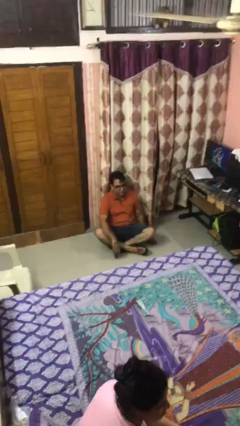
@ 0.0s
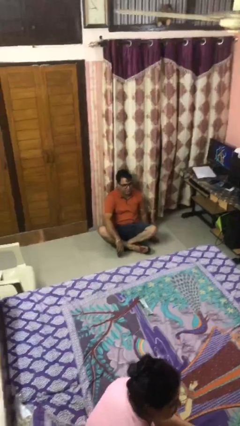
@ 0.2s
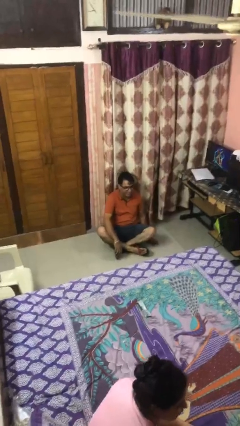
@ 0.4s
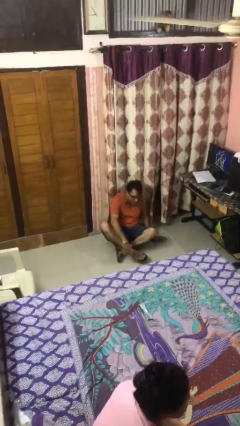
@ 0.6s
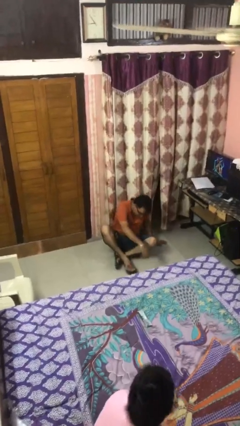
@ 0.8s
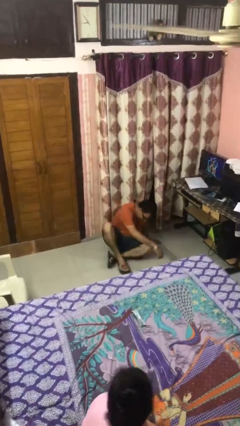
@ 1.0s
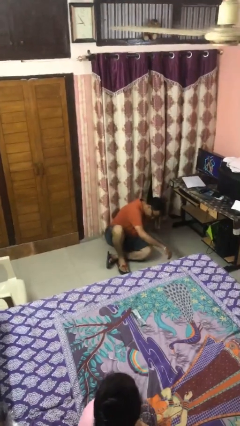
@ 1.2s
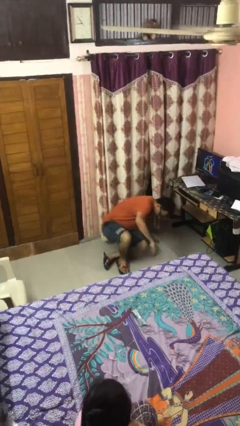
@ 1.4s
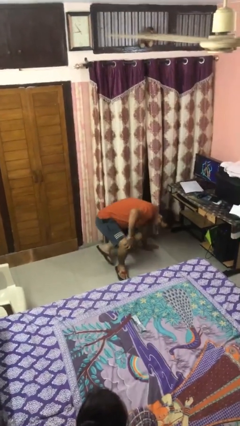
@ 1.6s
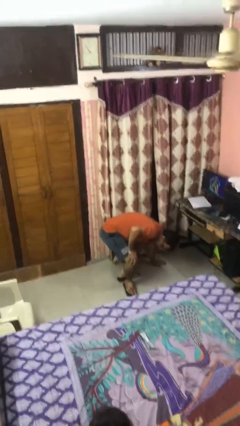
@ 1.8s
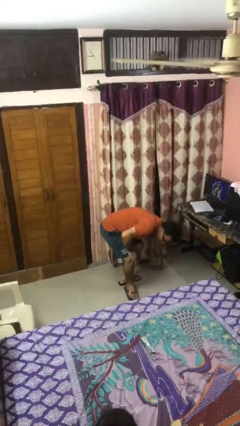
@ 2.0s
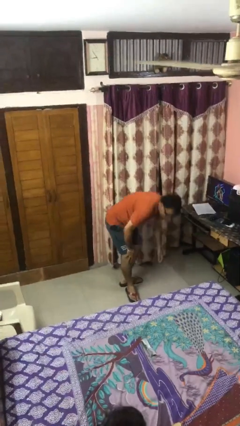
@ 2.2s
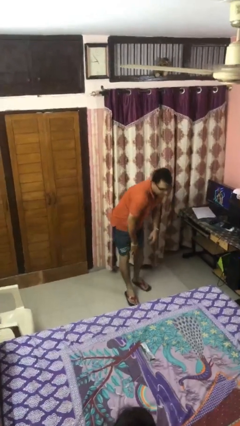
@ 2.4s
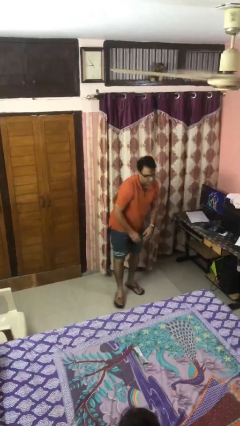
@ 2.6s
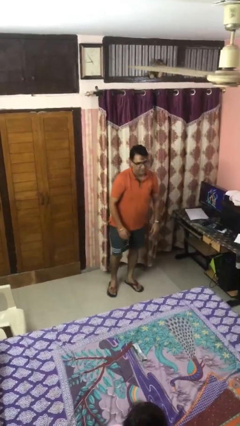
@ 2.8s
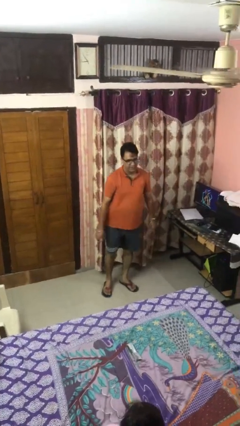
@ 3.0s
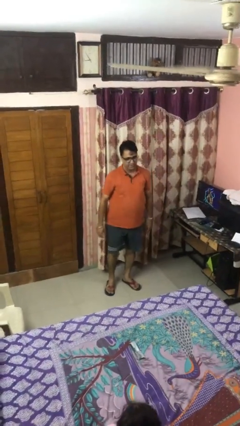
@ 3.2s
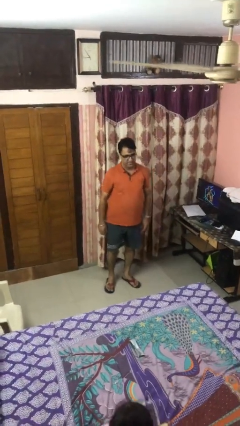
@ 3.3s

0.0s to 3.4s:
person stands up from floor

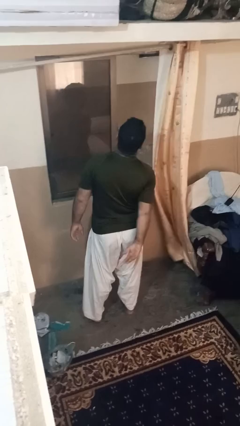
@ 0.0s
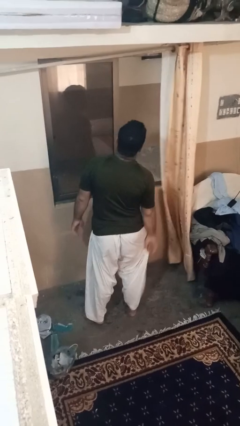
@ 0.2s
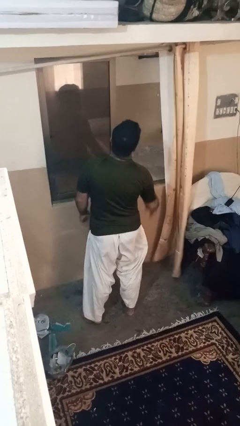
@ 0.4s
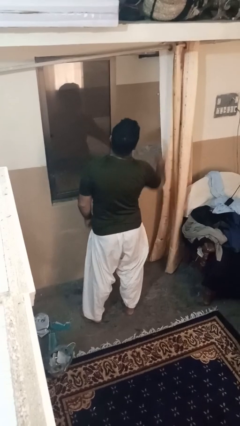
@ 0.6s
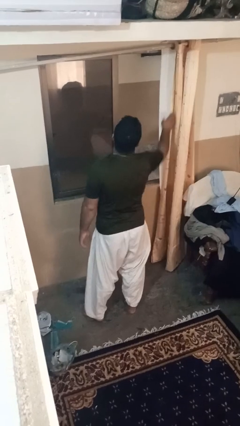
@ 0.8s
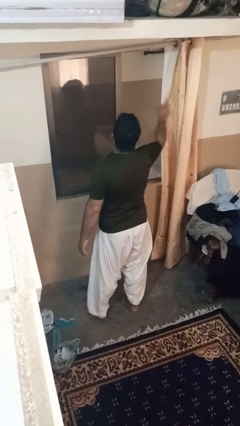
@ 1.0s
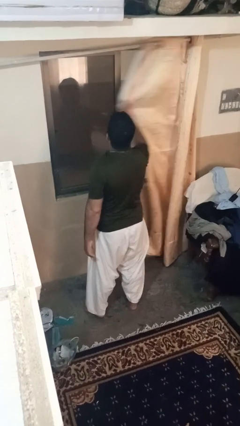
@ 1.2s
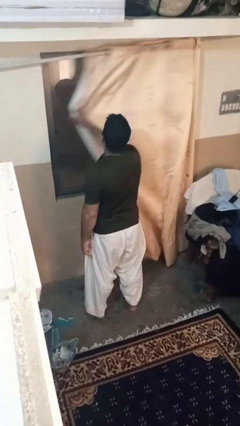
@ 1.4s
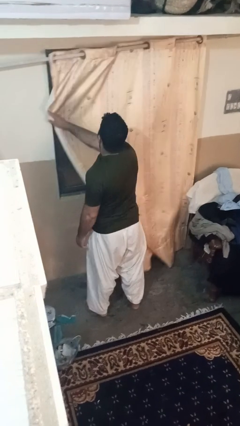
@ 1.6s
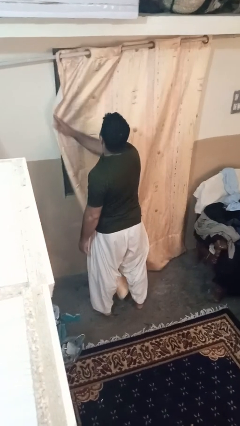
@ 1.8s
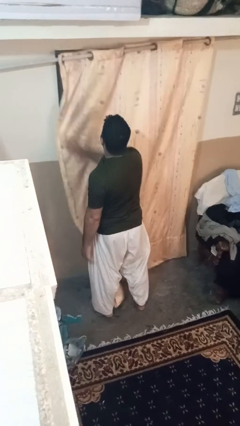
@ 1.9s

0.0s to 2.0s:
person closes curtains

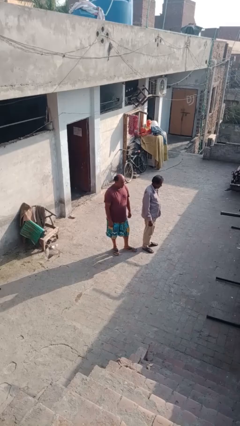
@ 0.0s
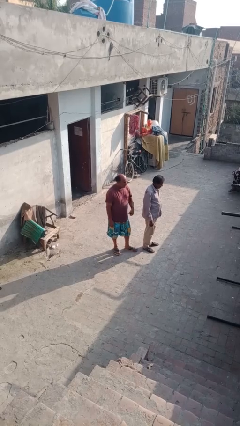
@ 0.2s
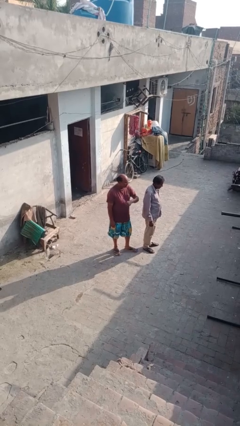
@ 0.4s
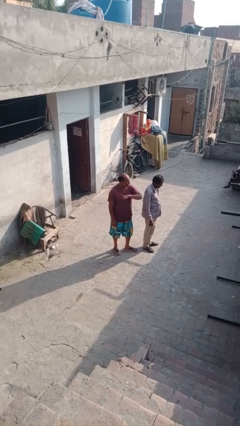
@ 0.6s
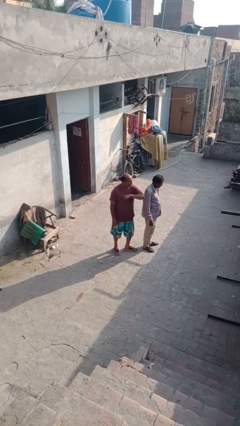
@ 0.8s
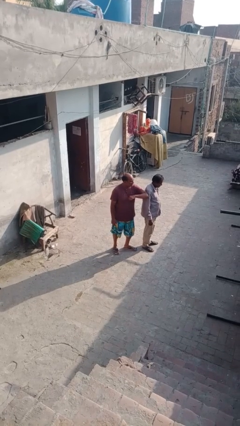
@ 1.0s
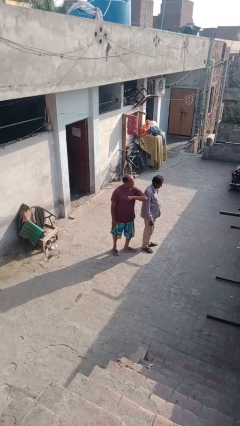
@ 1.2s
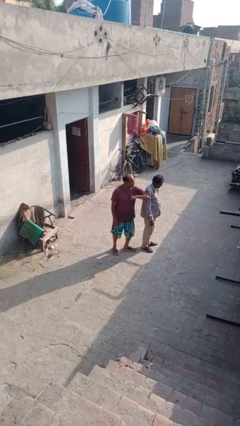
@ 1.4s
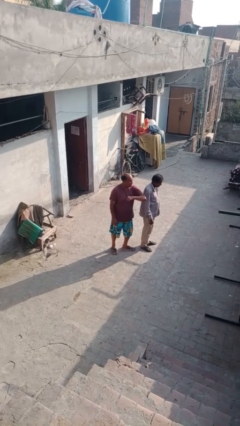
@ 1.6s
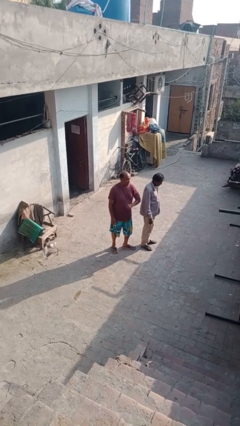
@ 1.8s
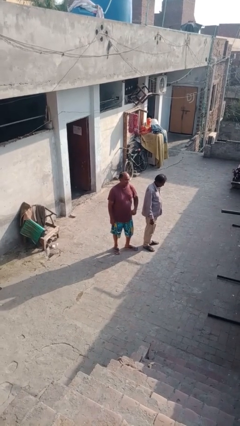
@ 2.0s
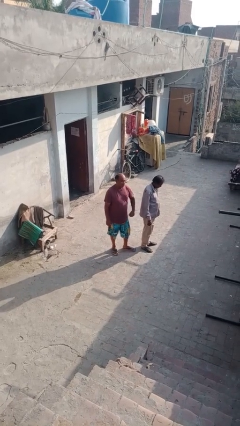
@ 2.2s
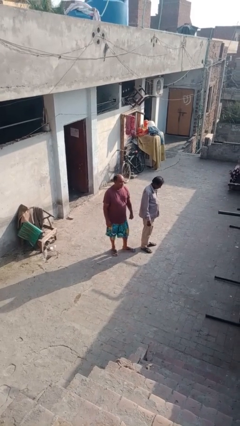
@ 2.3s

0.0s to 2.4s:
person nudges person with elbow

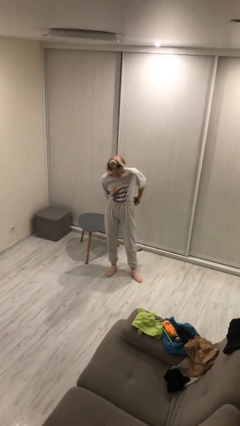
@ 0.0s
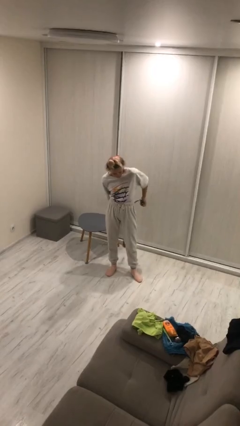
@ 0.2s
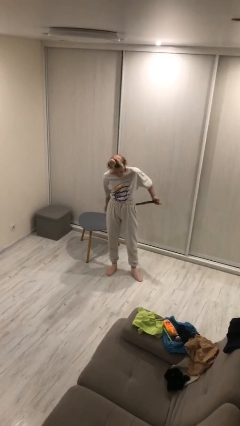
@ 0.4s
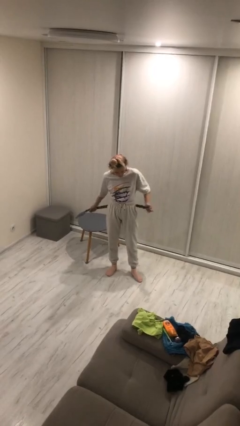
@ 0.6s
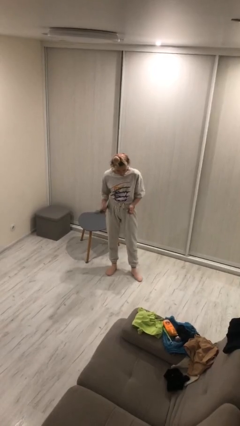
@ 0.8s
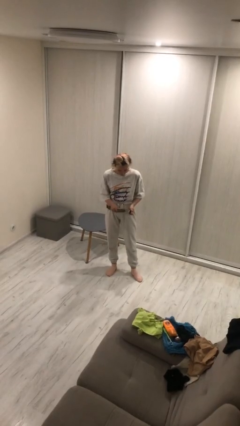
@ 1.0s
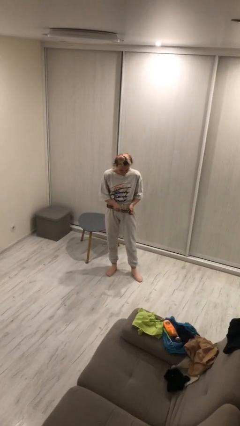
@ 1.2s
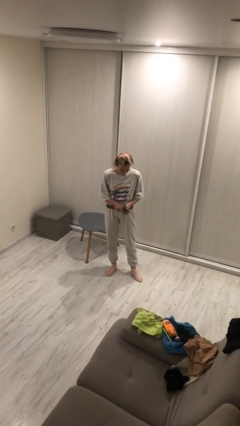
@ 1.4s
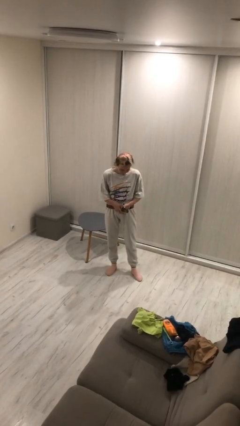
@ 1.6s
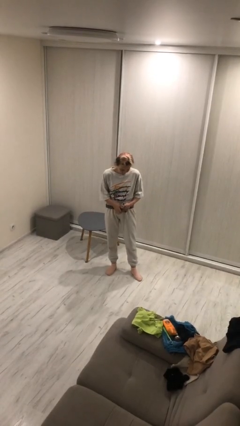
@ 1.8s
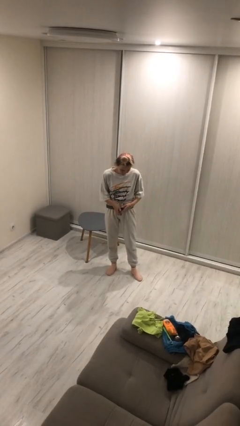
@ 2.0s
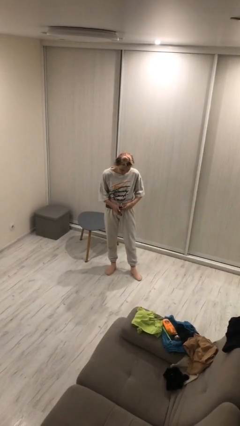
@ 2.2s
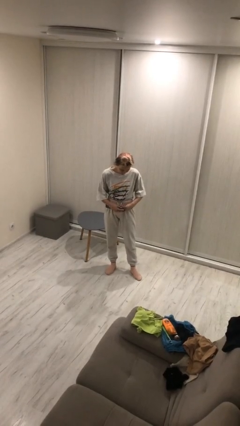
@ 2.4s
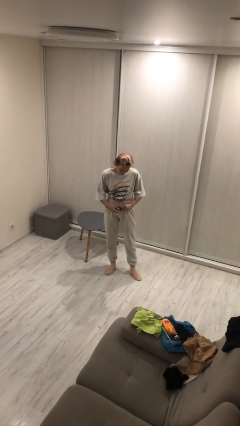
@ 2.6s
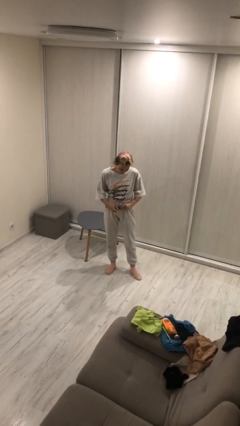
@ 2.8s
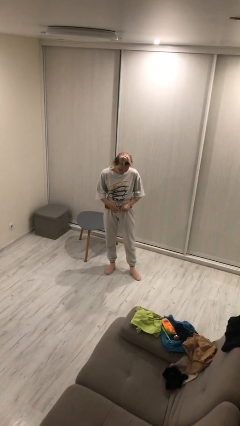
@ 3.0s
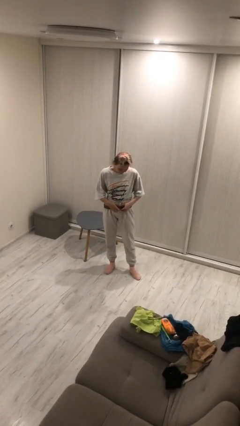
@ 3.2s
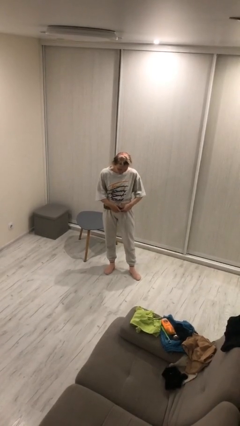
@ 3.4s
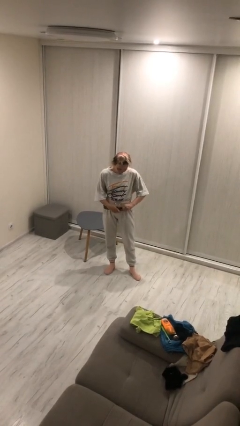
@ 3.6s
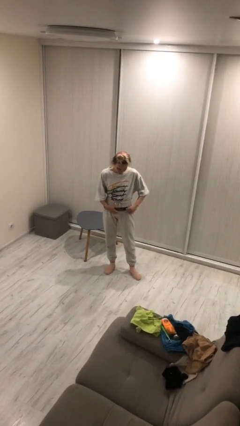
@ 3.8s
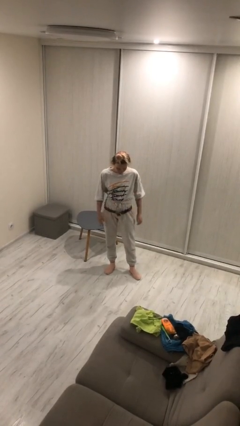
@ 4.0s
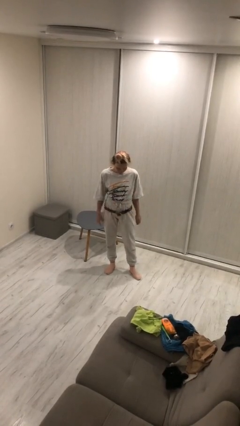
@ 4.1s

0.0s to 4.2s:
person puts on belt

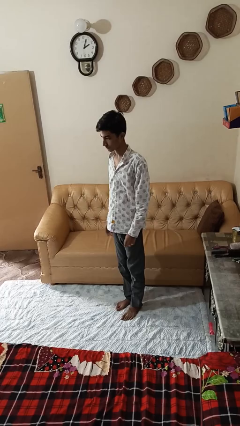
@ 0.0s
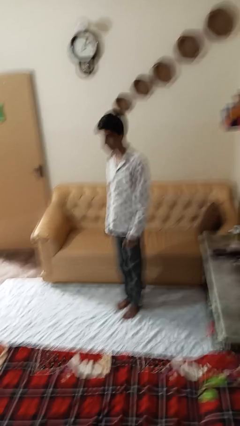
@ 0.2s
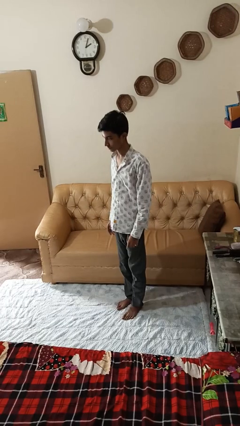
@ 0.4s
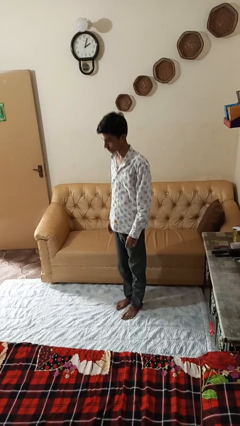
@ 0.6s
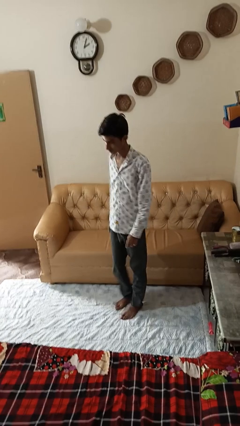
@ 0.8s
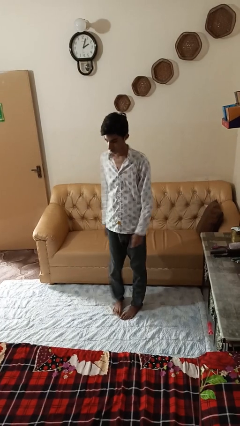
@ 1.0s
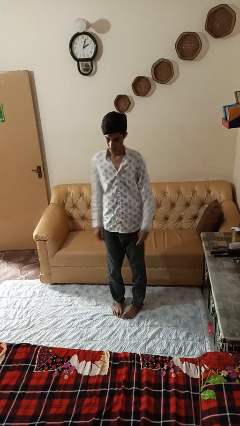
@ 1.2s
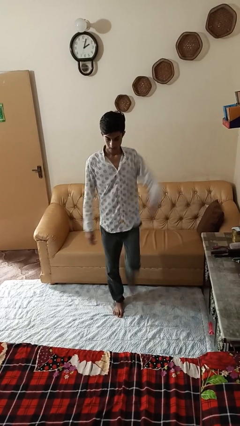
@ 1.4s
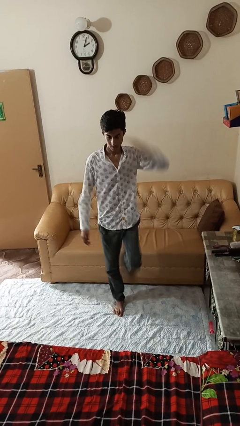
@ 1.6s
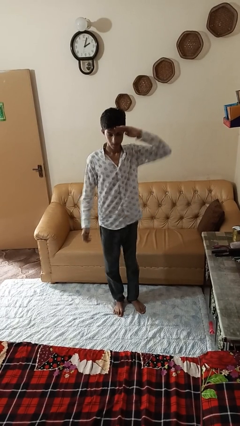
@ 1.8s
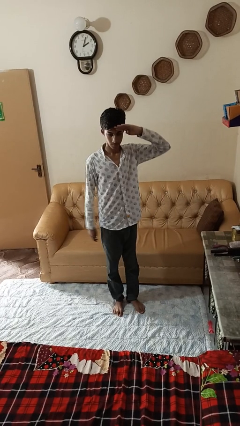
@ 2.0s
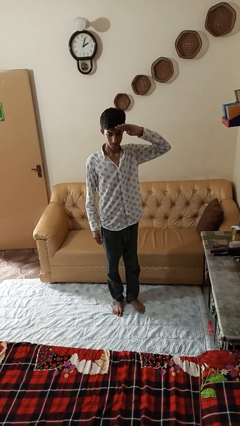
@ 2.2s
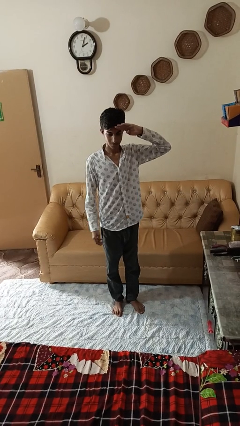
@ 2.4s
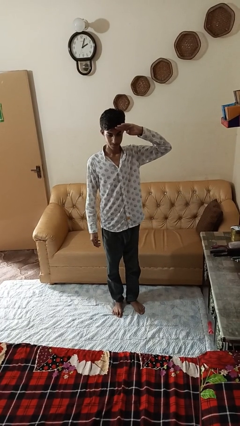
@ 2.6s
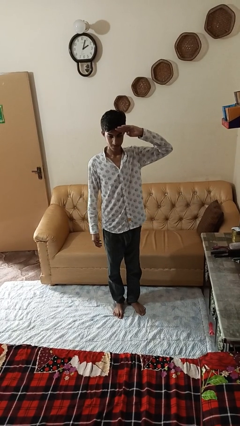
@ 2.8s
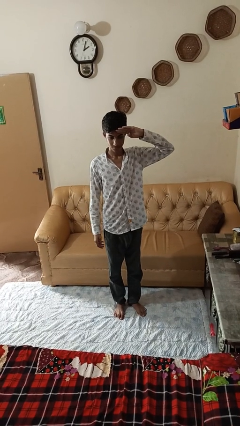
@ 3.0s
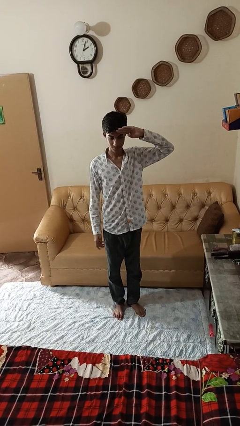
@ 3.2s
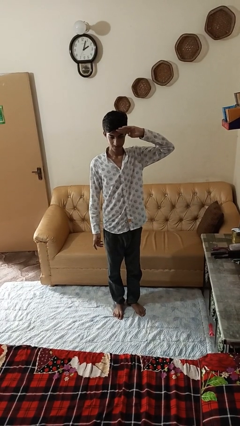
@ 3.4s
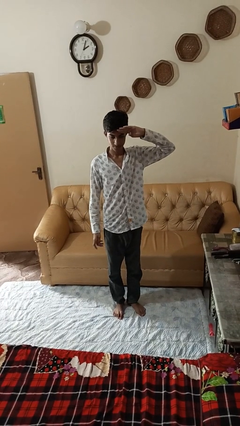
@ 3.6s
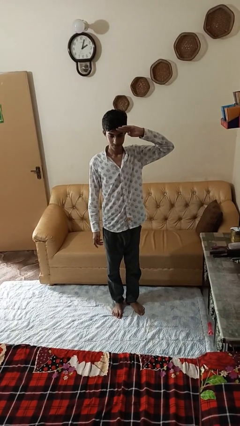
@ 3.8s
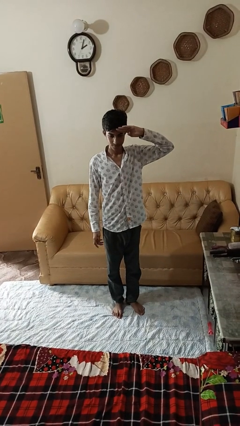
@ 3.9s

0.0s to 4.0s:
person salutes

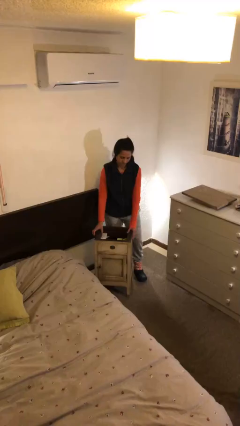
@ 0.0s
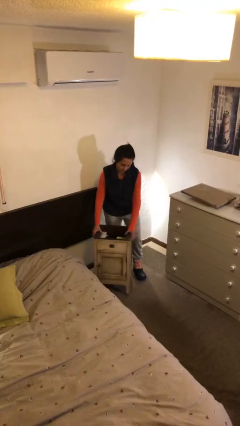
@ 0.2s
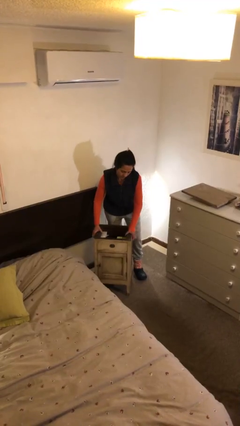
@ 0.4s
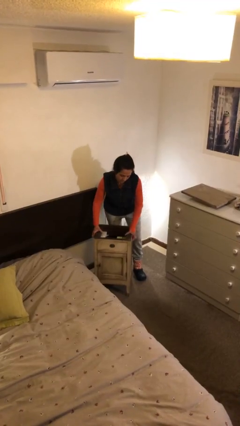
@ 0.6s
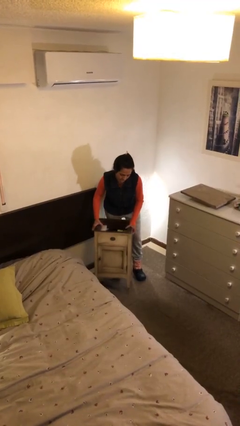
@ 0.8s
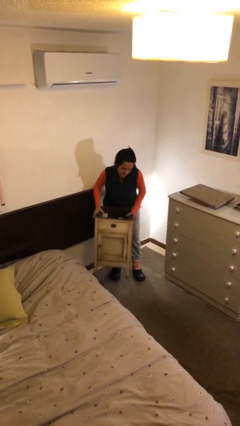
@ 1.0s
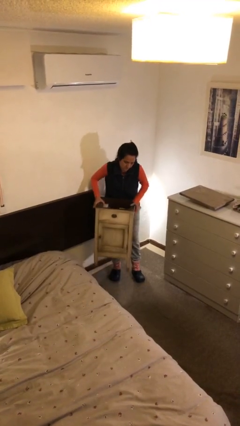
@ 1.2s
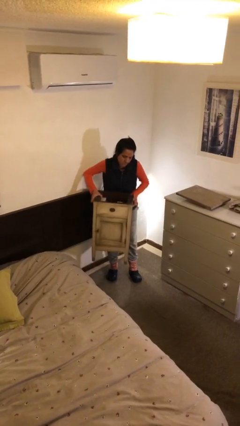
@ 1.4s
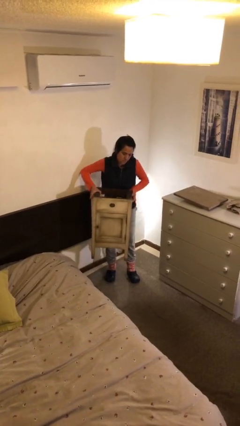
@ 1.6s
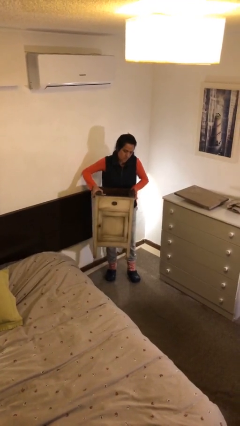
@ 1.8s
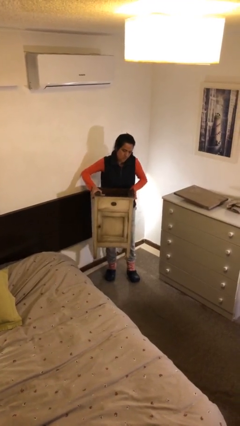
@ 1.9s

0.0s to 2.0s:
person picks up object from floor
